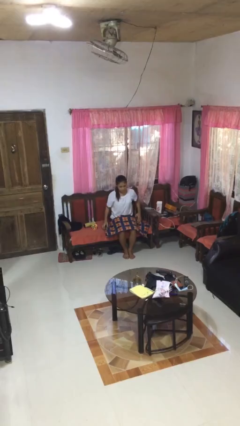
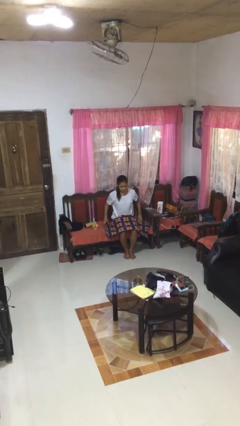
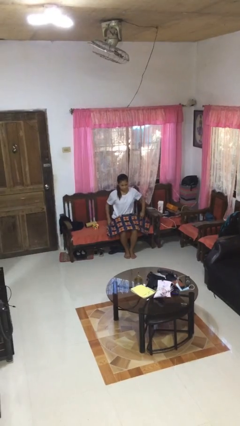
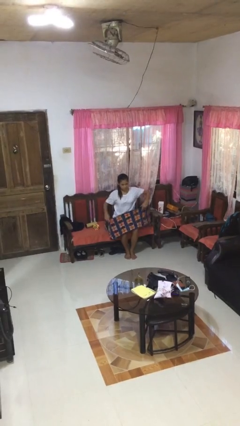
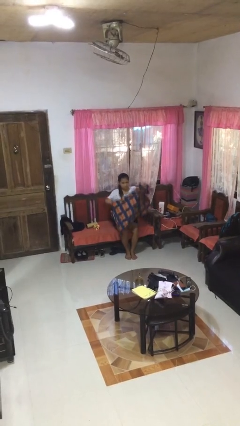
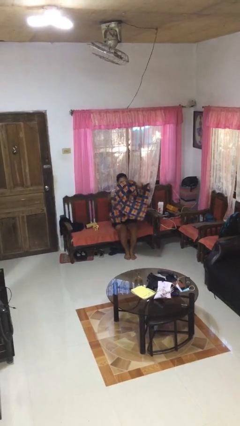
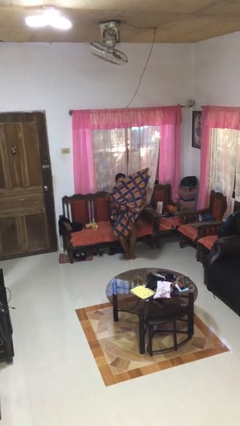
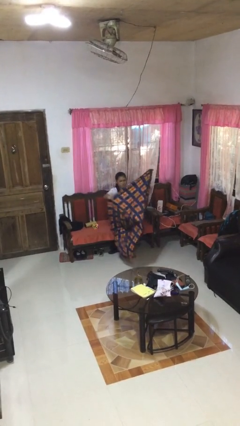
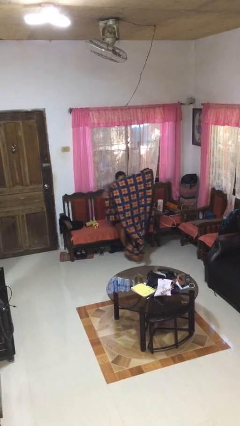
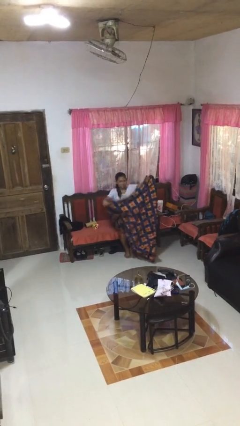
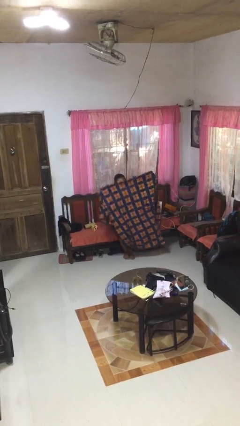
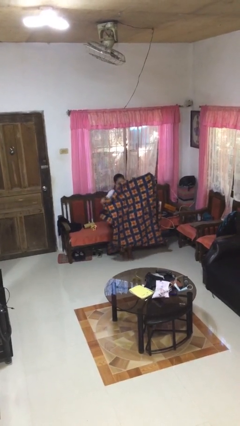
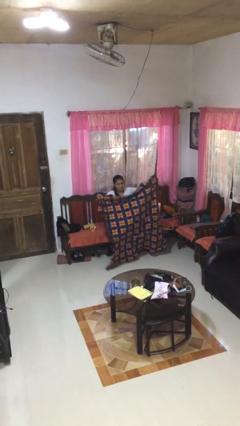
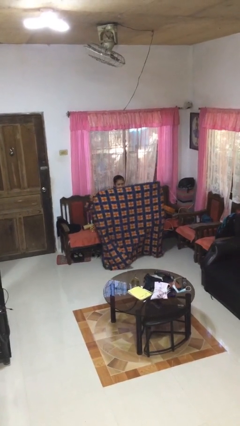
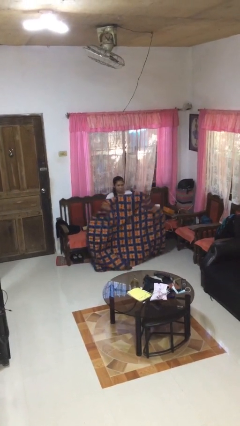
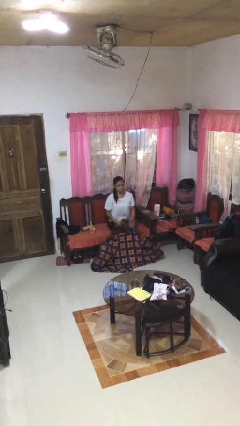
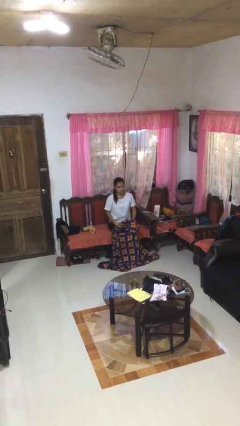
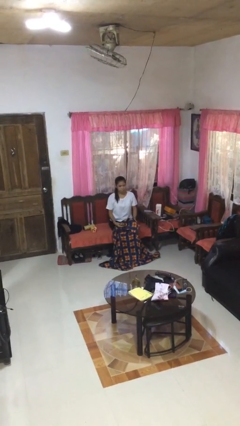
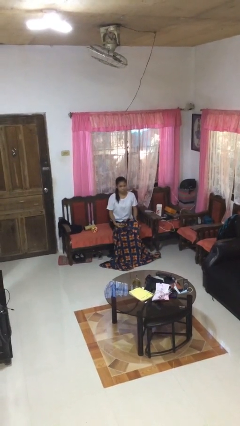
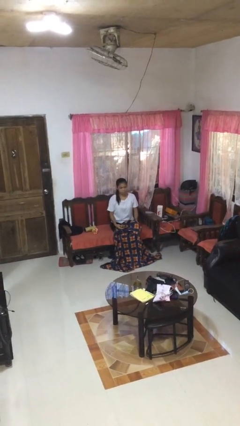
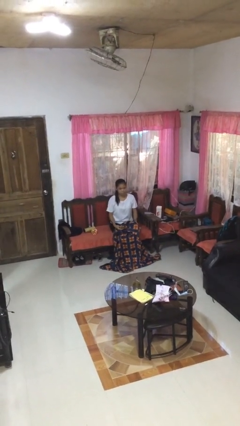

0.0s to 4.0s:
person unfolds blanket

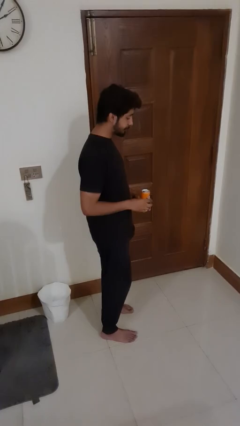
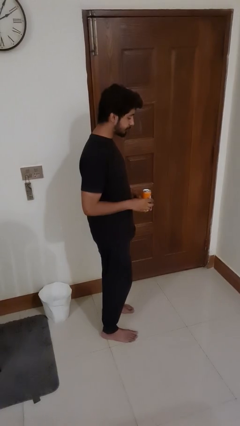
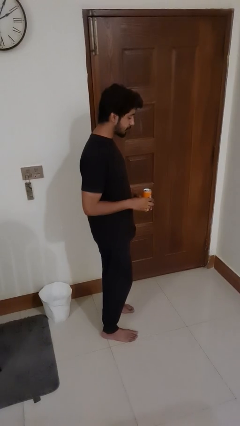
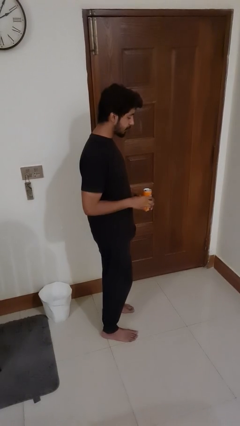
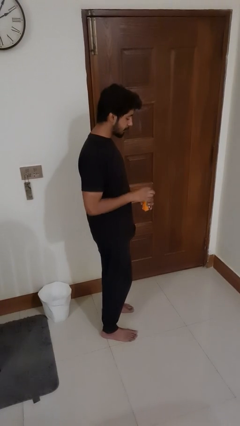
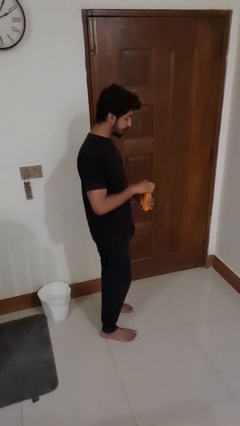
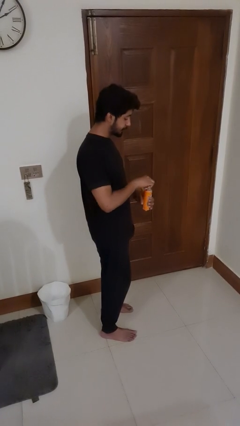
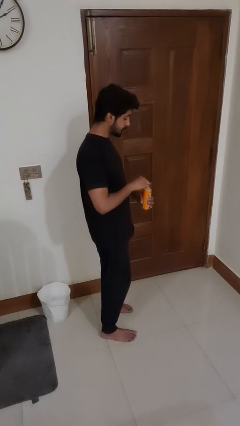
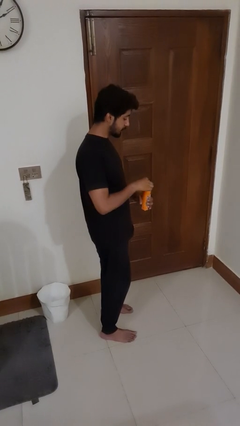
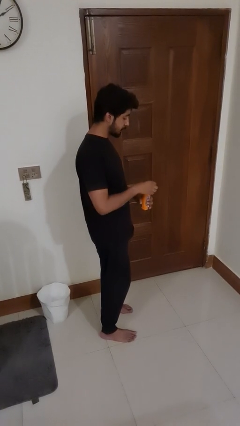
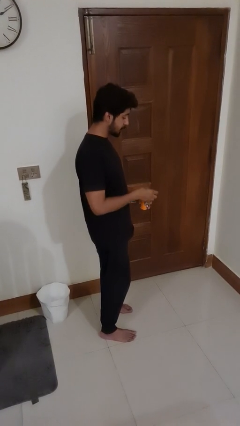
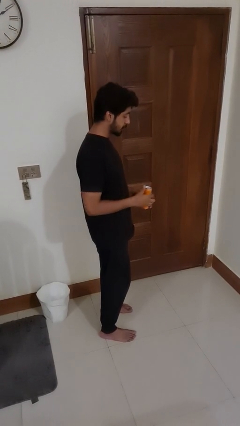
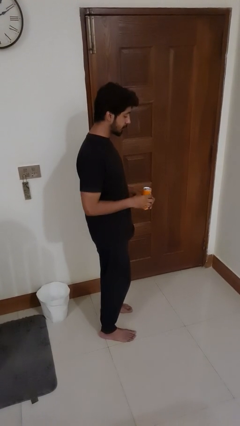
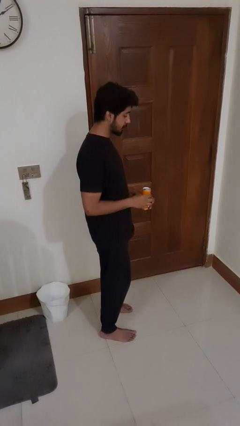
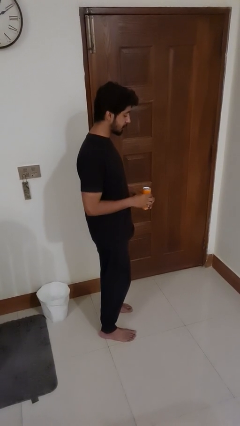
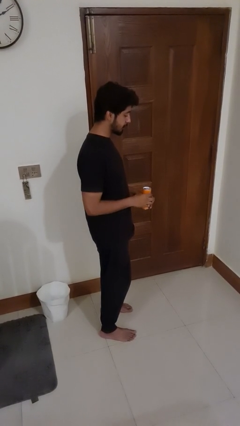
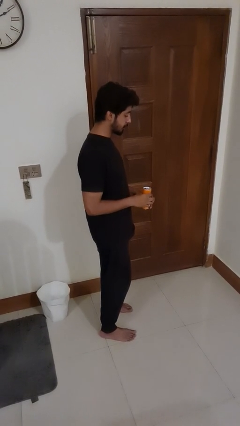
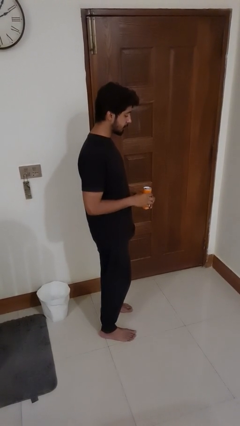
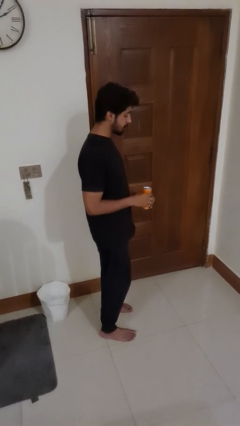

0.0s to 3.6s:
person opens beverage can

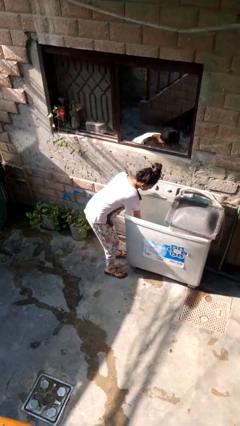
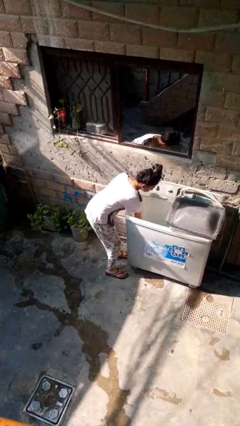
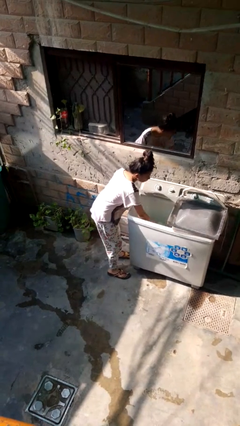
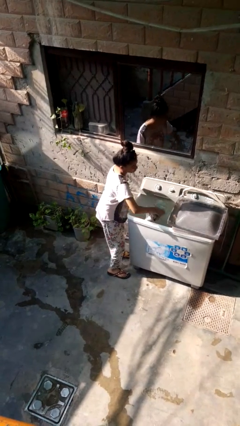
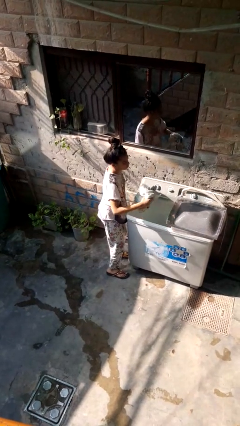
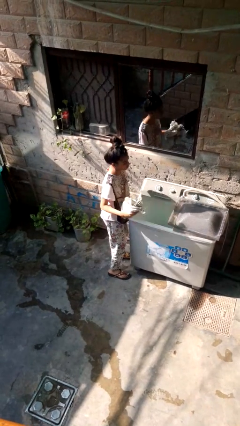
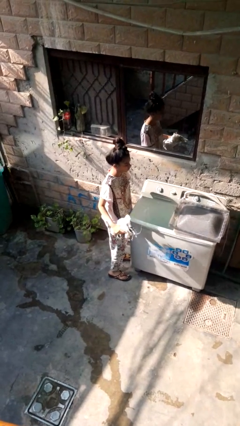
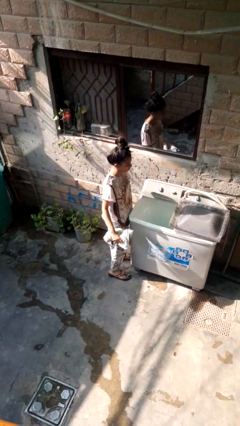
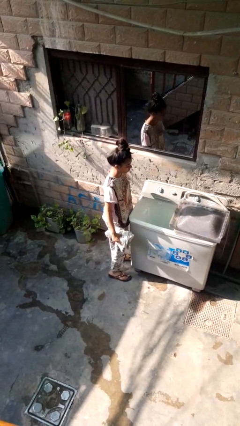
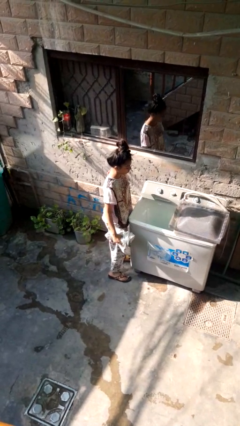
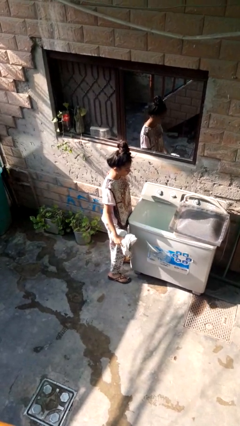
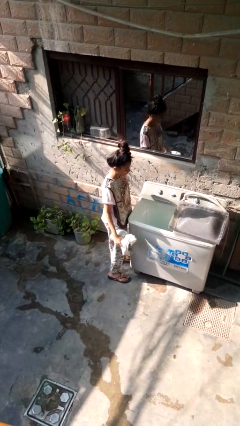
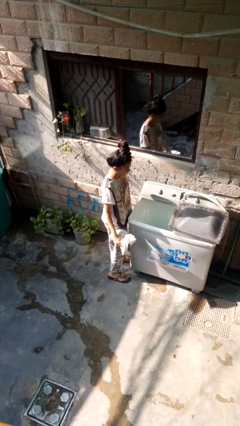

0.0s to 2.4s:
person unloads clotheswasher

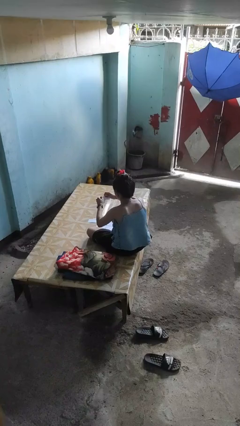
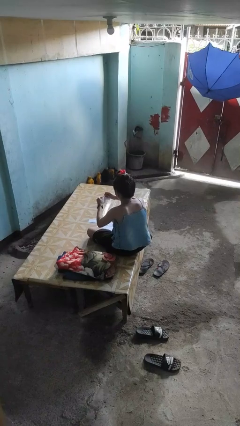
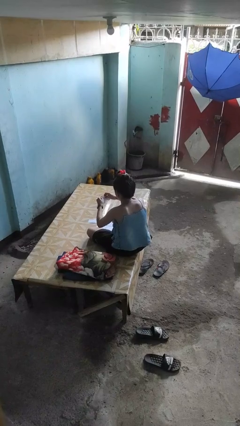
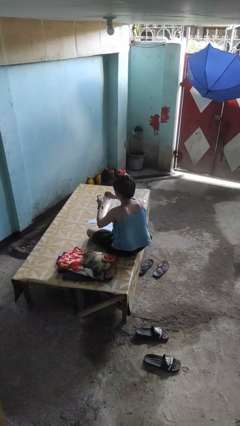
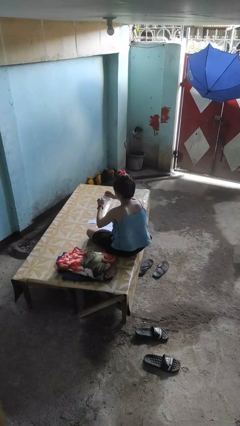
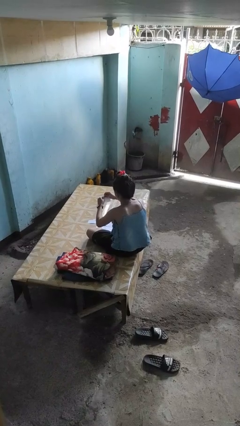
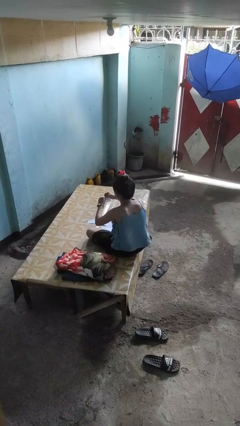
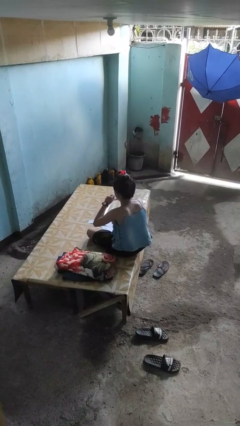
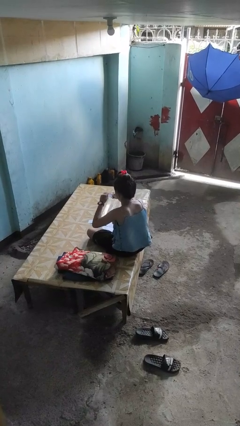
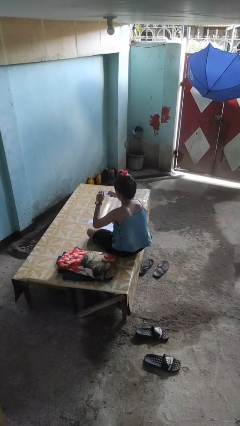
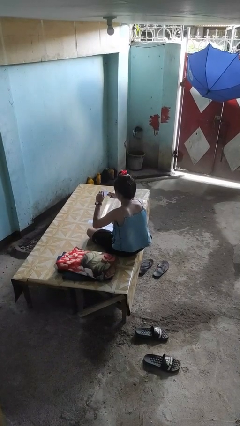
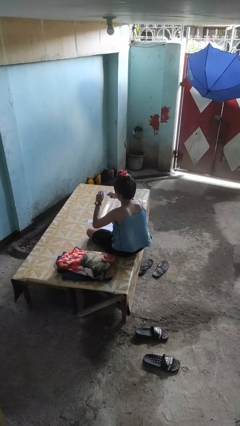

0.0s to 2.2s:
person tears paper

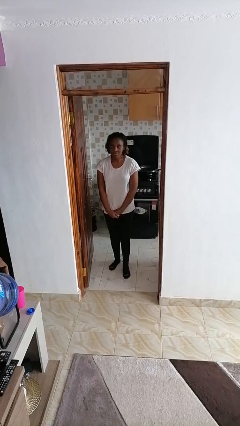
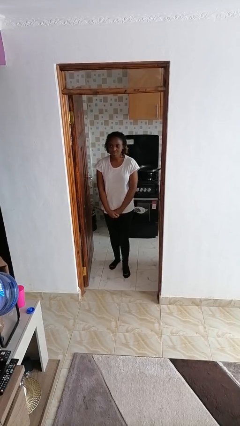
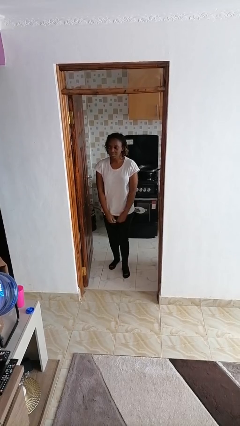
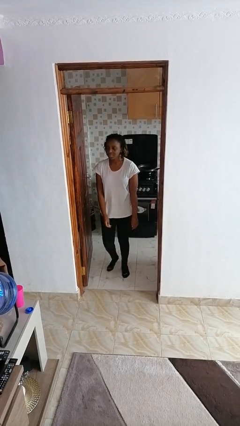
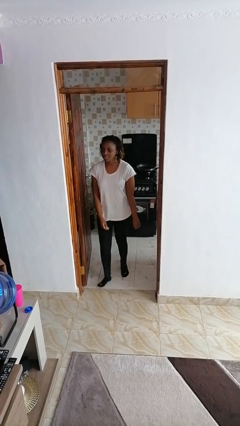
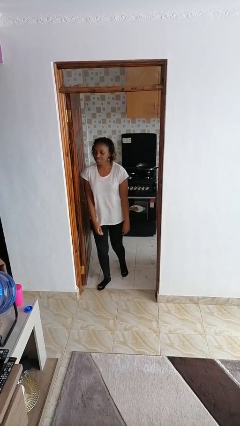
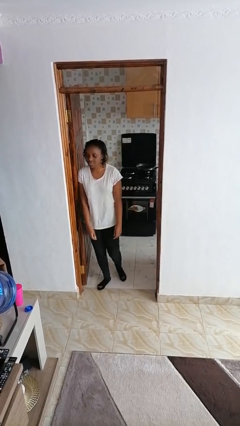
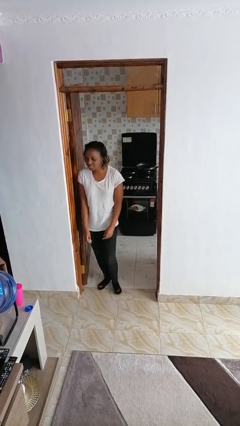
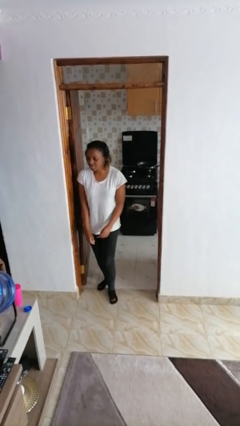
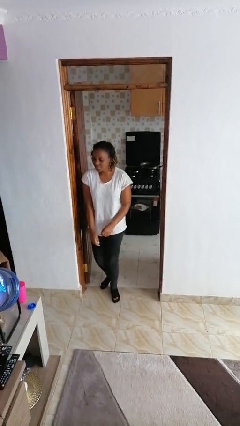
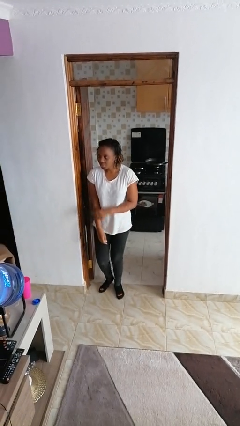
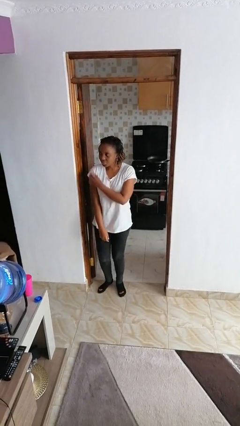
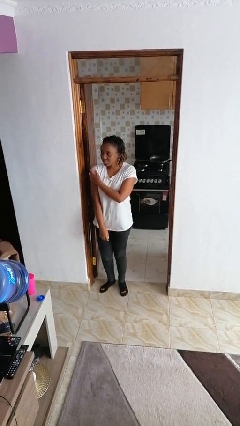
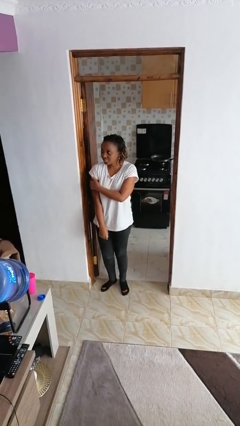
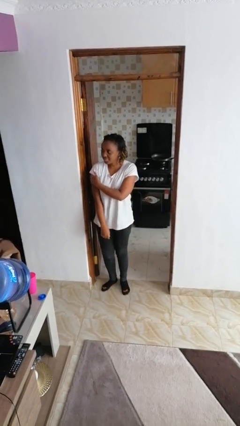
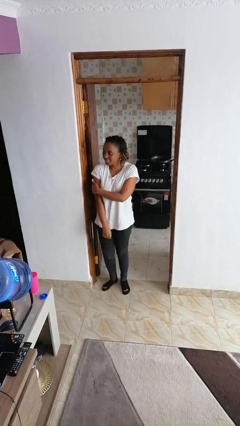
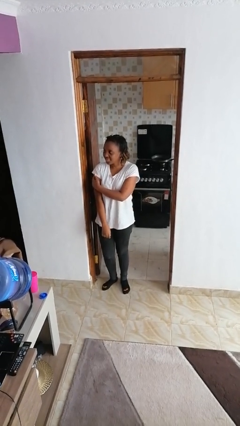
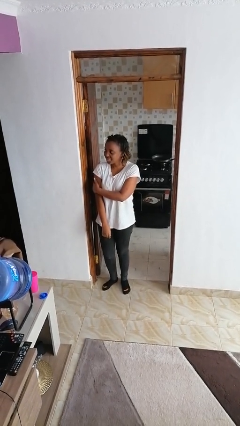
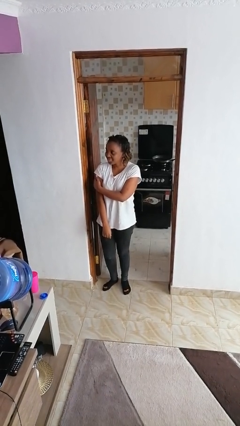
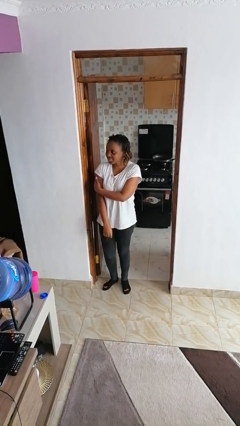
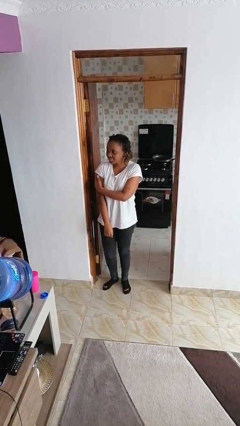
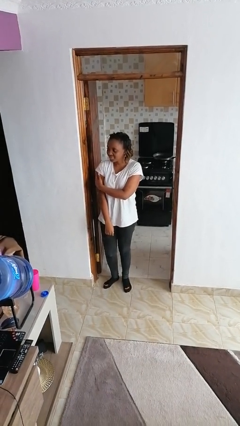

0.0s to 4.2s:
person bumps into wall

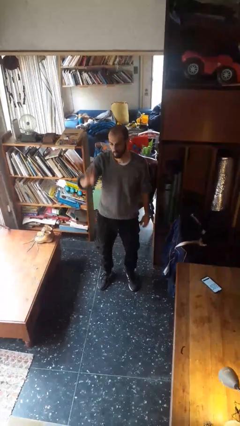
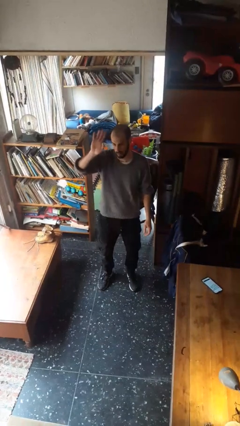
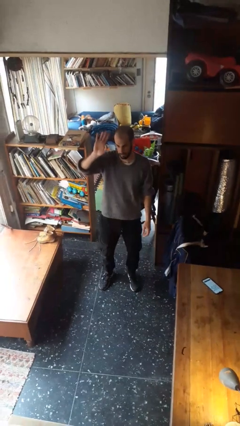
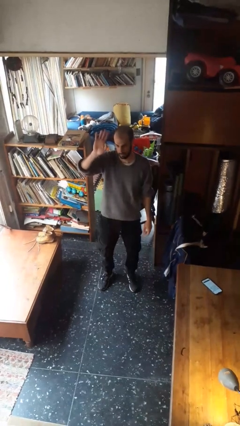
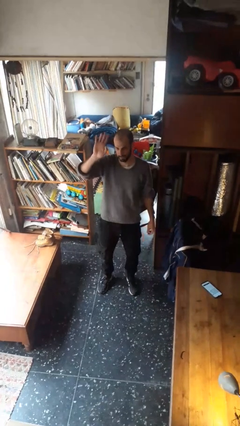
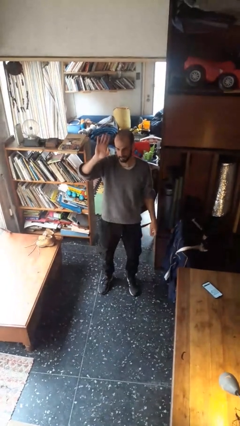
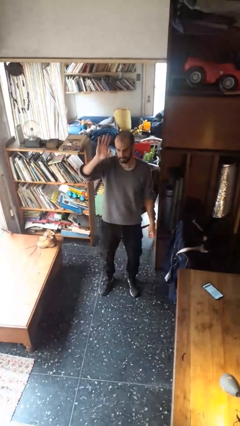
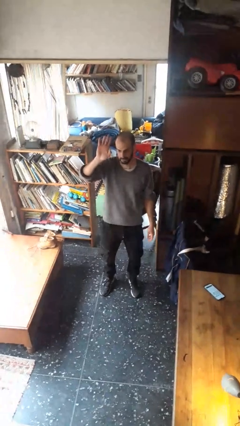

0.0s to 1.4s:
person gestures raise hand
